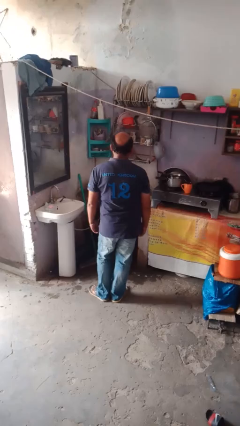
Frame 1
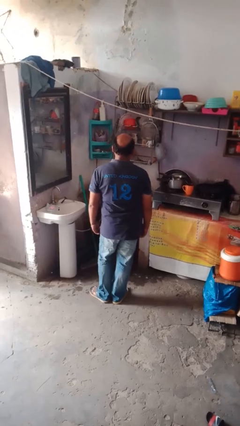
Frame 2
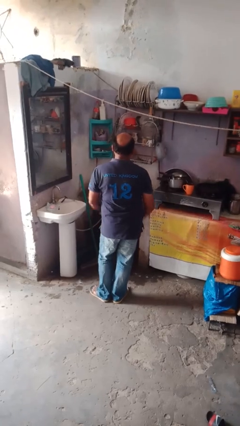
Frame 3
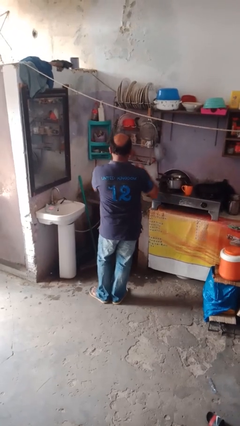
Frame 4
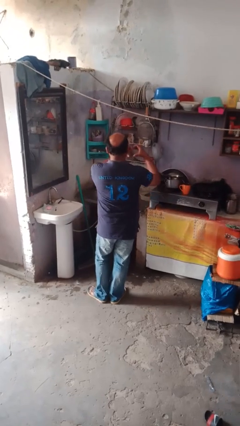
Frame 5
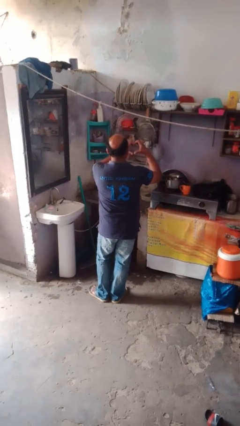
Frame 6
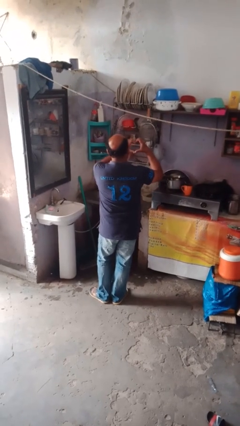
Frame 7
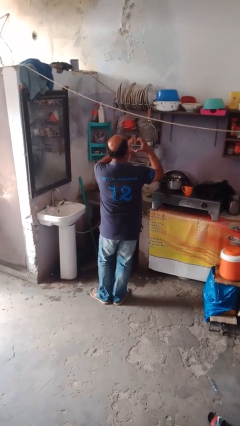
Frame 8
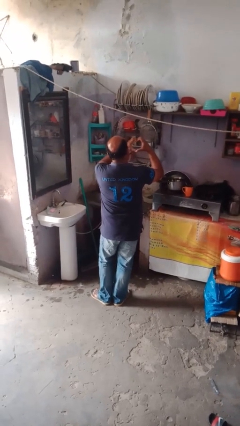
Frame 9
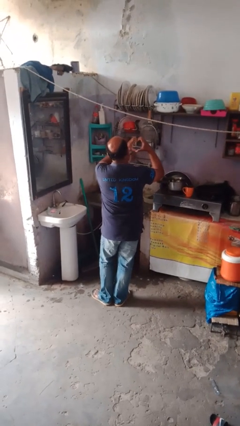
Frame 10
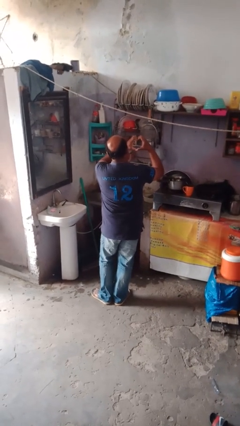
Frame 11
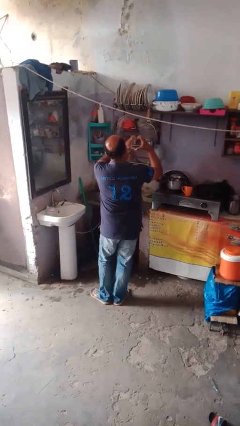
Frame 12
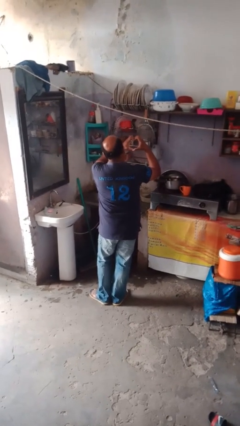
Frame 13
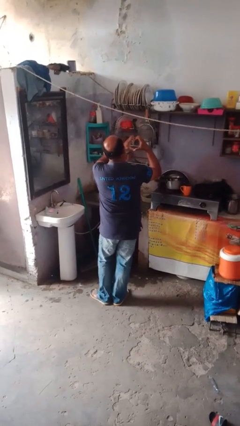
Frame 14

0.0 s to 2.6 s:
person gestures heart

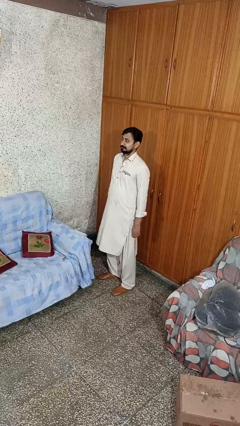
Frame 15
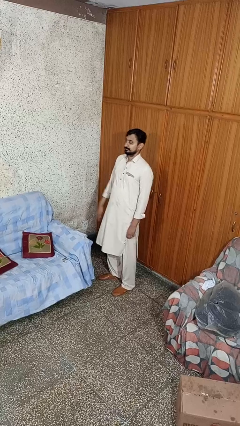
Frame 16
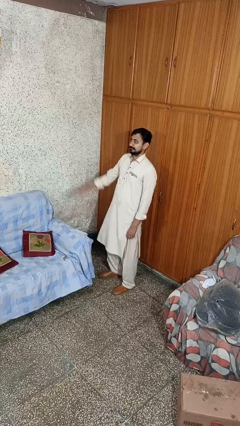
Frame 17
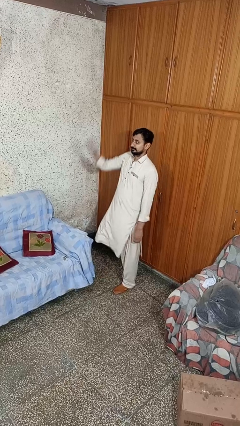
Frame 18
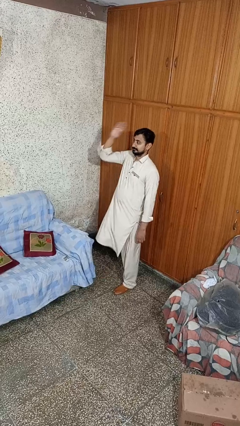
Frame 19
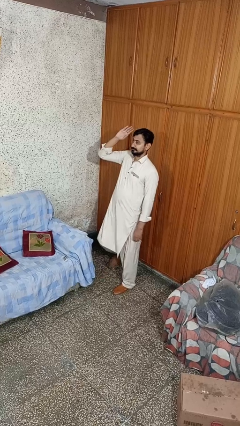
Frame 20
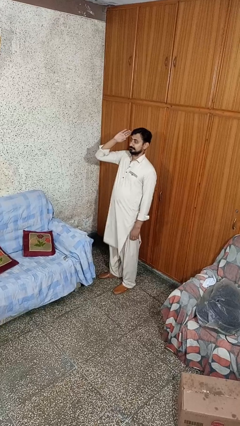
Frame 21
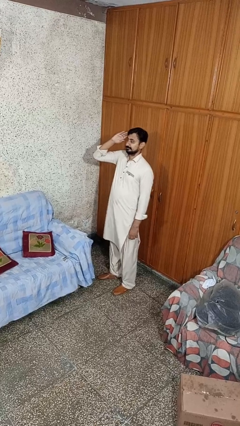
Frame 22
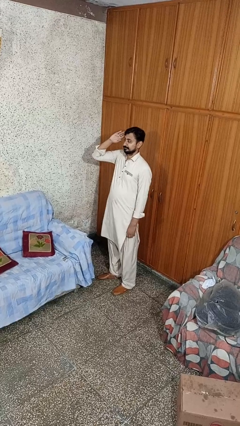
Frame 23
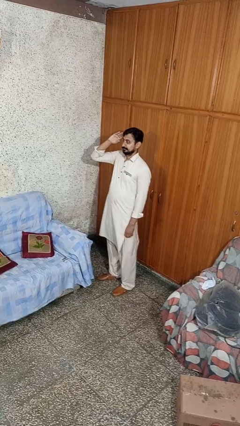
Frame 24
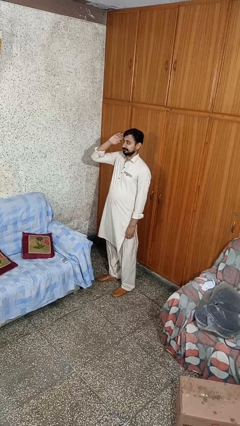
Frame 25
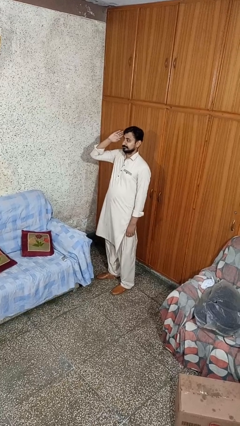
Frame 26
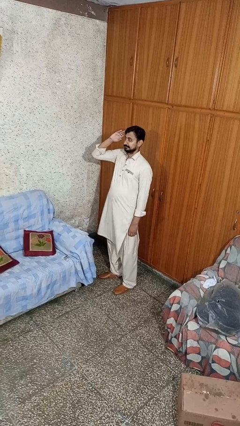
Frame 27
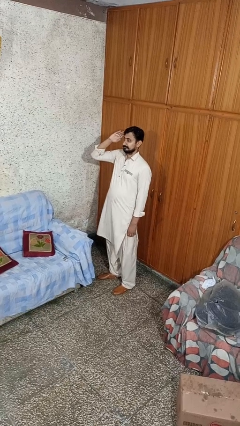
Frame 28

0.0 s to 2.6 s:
person salutes

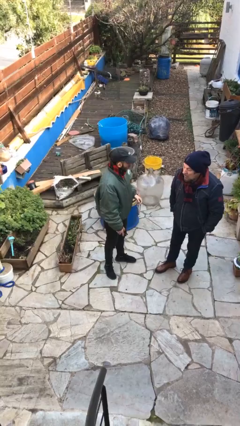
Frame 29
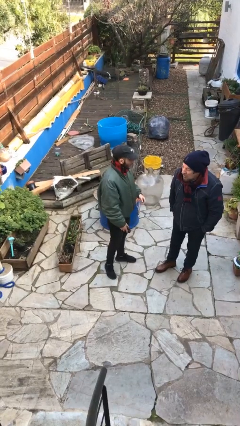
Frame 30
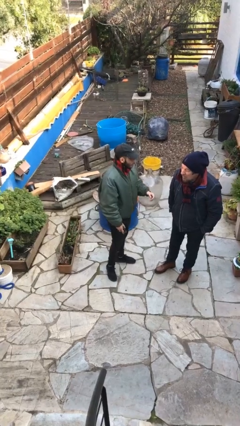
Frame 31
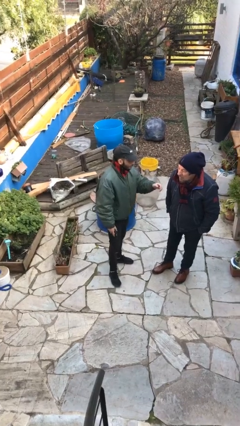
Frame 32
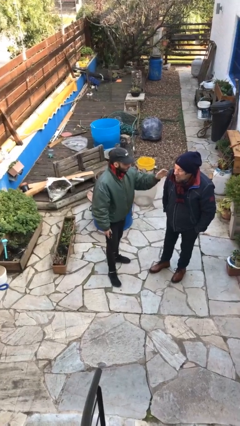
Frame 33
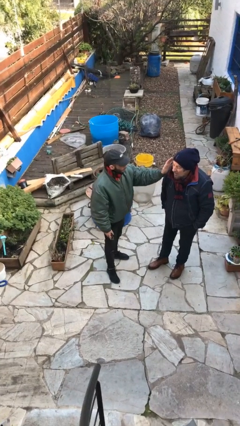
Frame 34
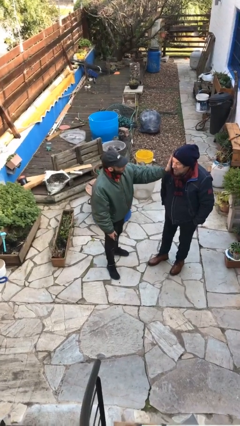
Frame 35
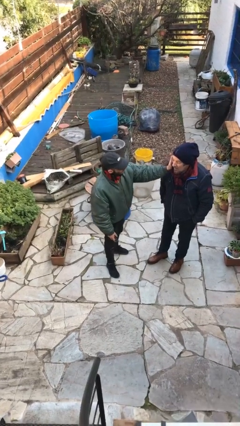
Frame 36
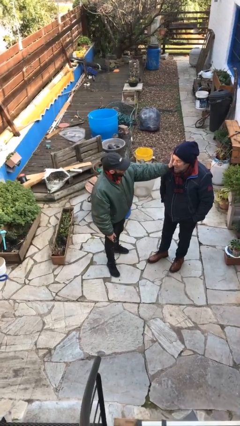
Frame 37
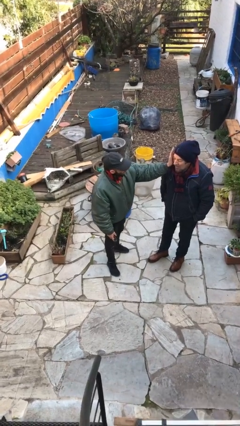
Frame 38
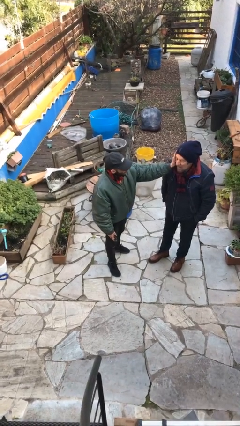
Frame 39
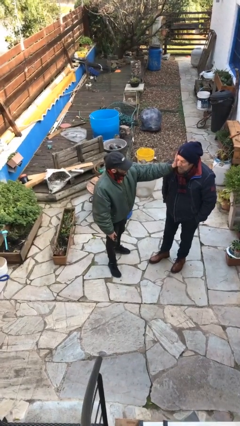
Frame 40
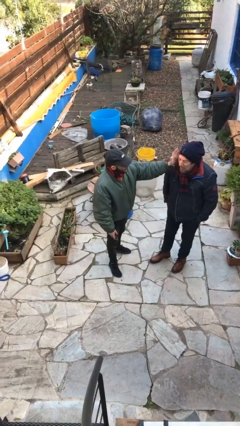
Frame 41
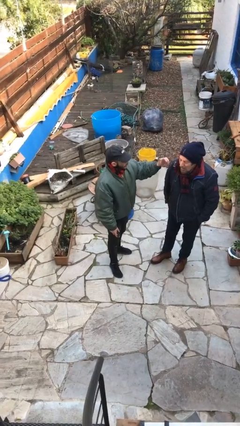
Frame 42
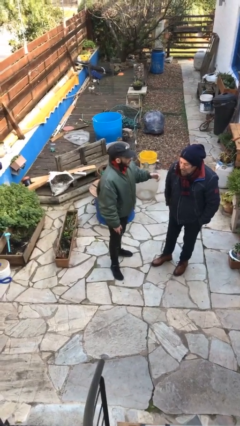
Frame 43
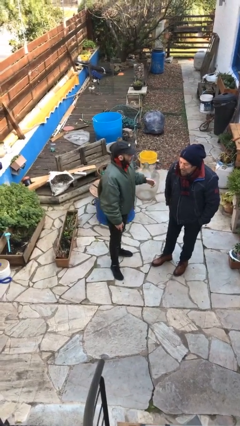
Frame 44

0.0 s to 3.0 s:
person touches face of person

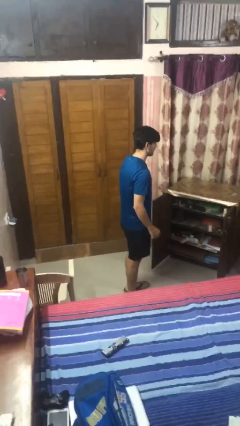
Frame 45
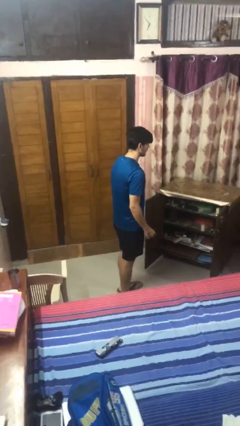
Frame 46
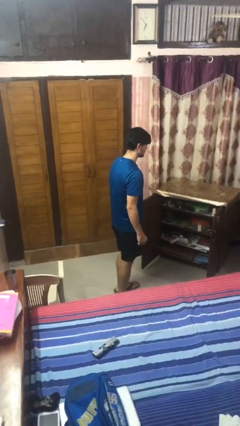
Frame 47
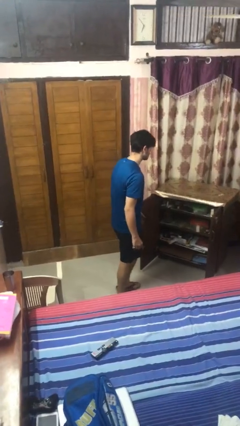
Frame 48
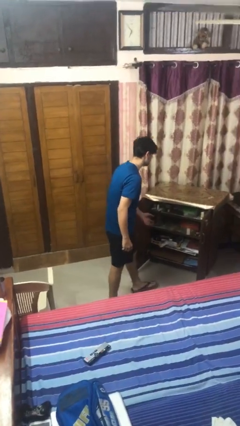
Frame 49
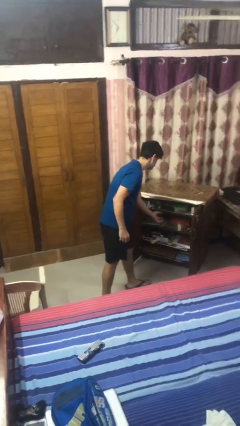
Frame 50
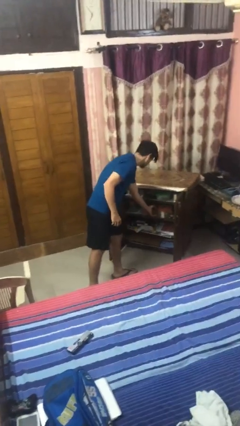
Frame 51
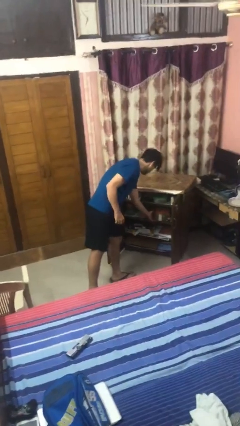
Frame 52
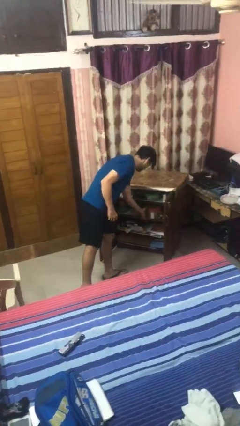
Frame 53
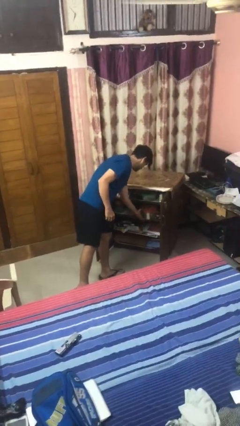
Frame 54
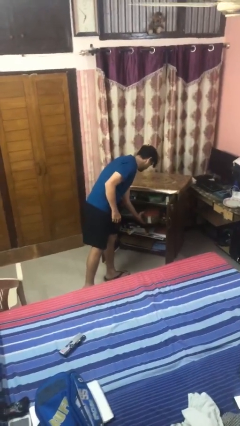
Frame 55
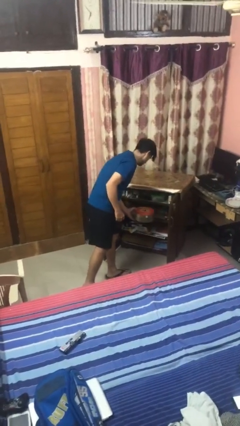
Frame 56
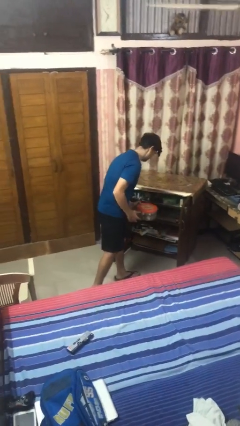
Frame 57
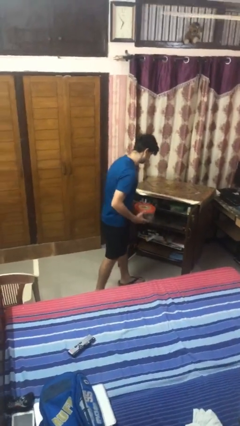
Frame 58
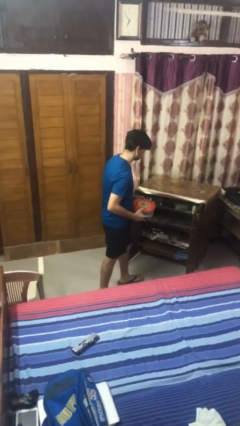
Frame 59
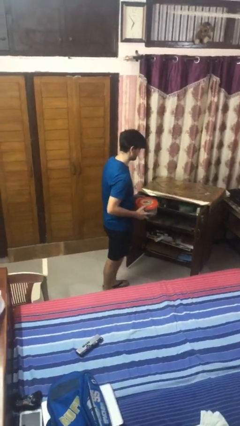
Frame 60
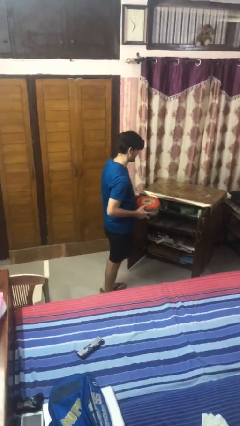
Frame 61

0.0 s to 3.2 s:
person picks up object from cabinet

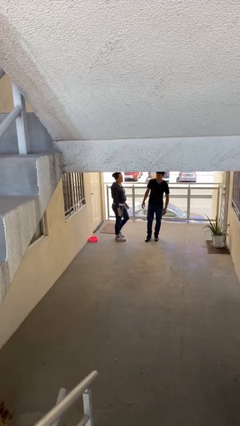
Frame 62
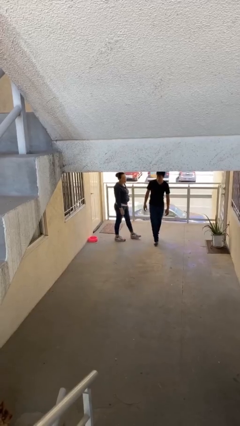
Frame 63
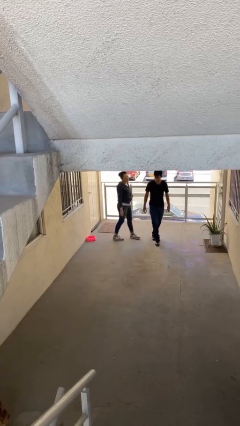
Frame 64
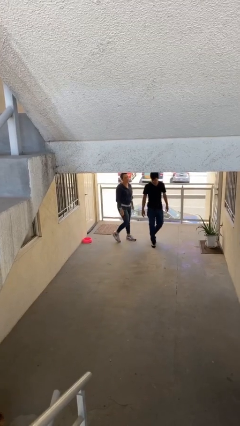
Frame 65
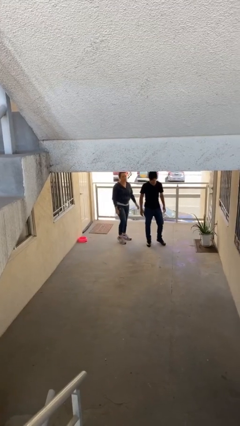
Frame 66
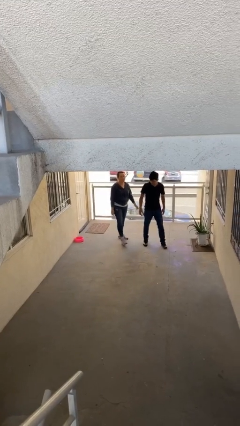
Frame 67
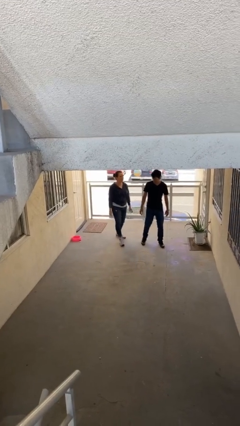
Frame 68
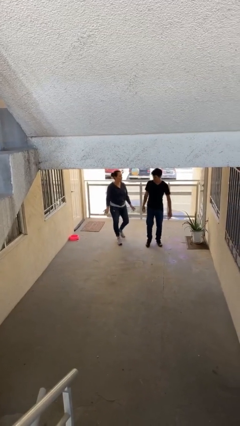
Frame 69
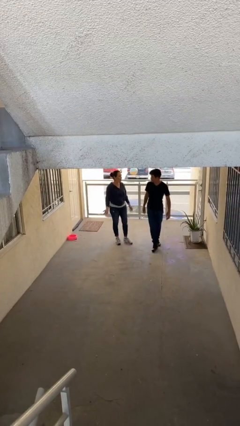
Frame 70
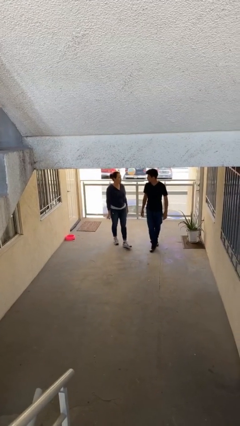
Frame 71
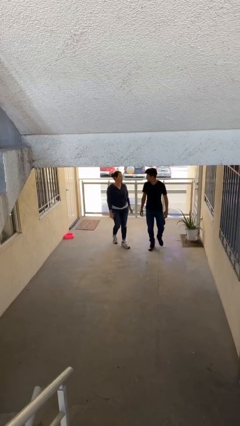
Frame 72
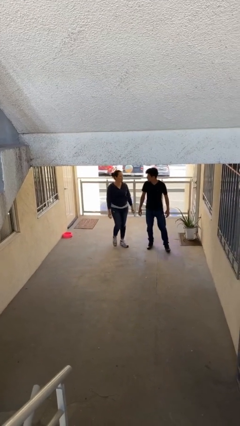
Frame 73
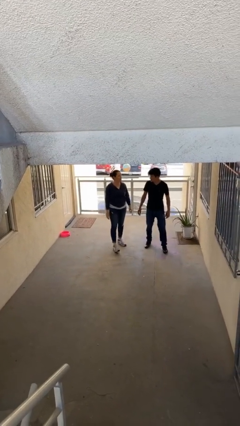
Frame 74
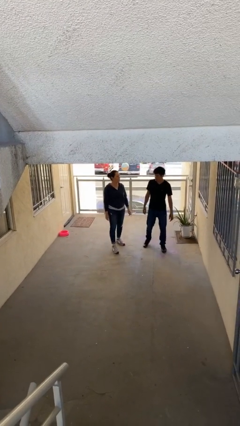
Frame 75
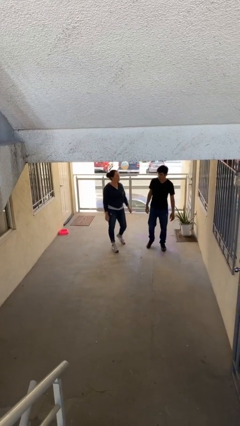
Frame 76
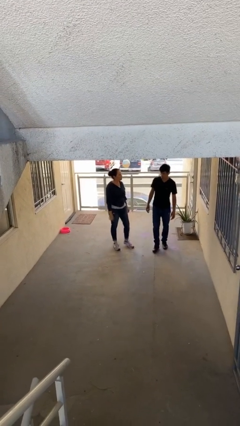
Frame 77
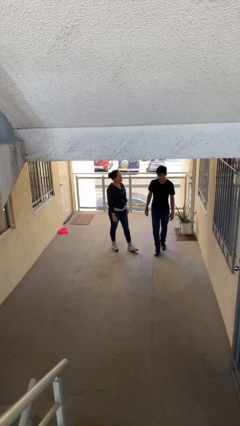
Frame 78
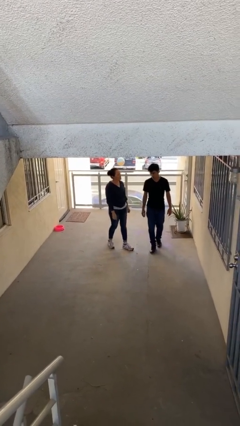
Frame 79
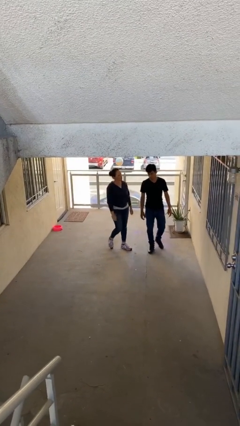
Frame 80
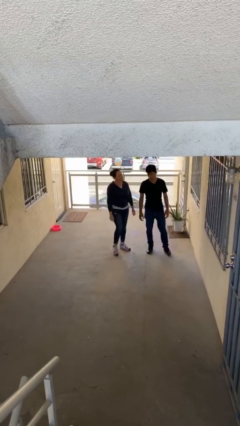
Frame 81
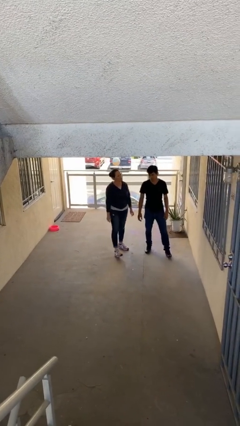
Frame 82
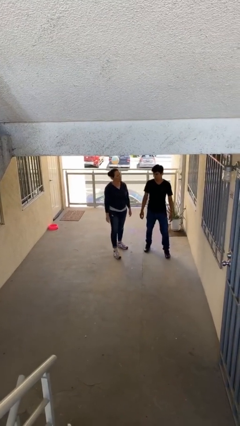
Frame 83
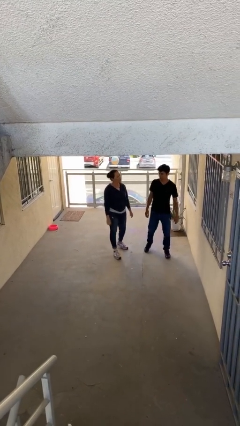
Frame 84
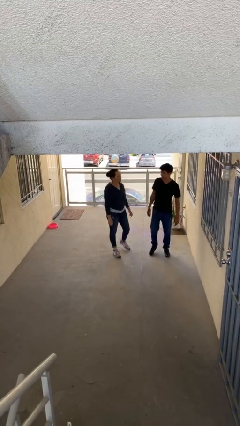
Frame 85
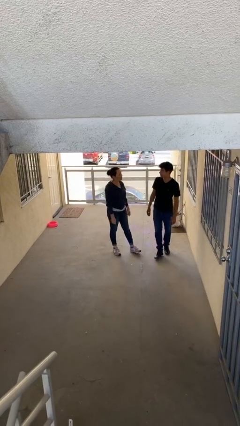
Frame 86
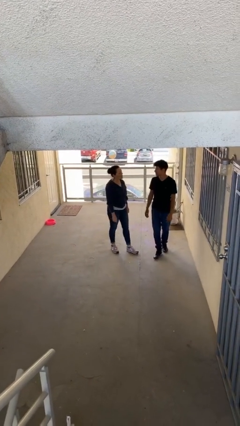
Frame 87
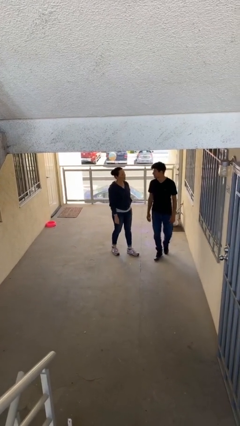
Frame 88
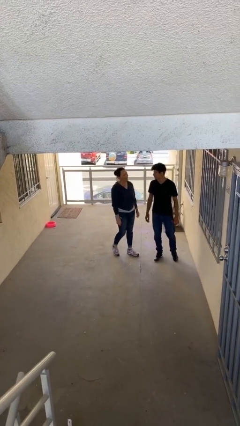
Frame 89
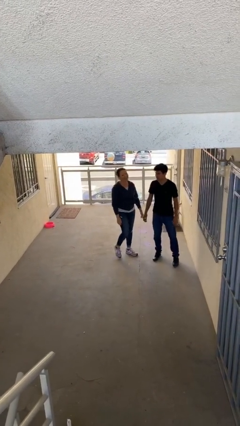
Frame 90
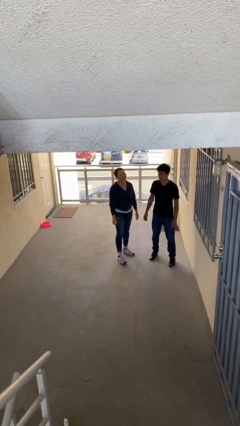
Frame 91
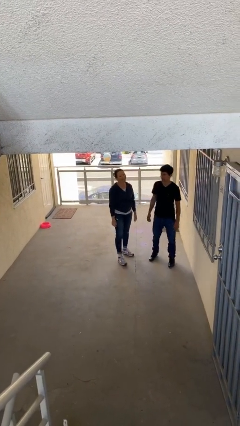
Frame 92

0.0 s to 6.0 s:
person talks to person

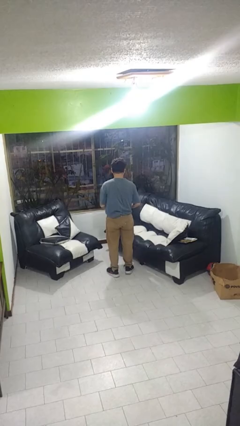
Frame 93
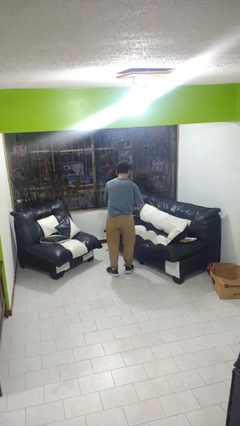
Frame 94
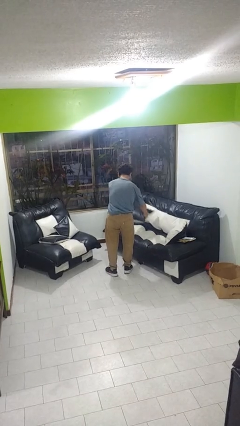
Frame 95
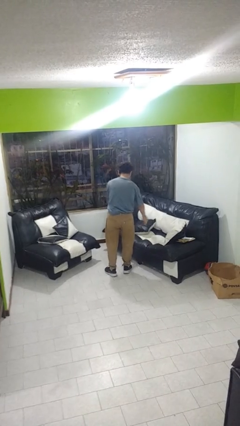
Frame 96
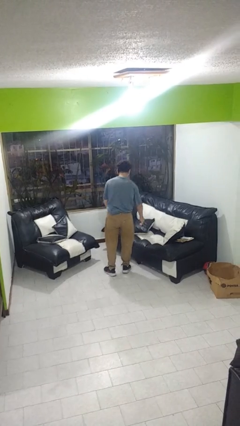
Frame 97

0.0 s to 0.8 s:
person puts down object on couch
